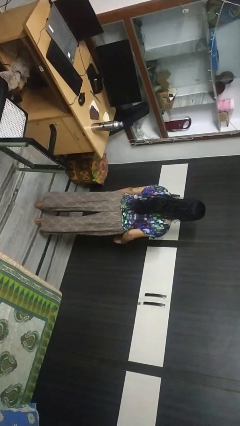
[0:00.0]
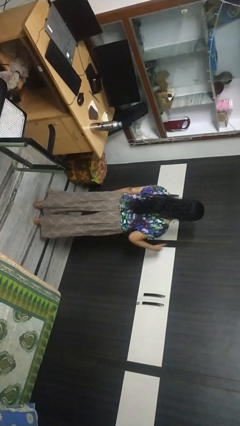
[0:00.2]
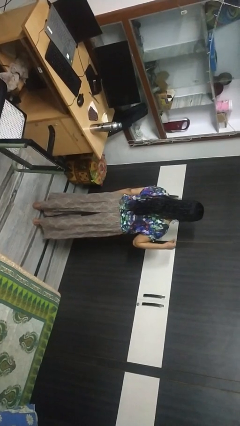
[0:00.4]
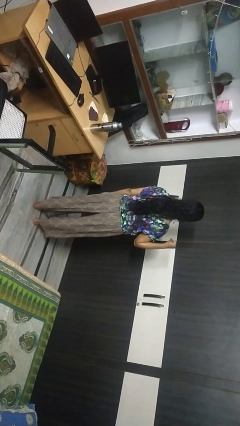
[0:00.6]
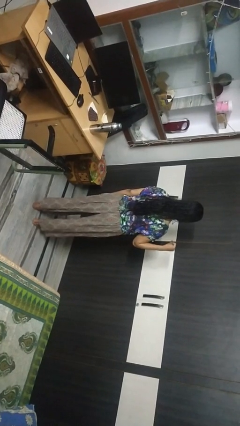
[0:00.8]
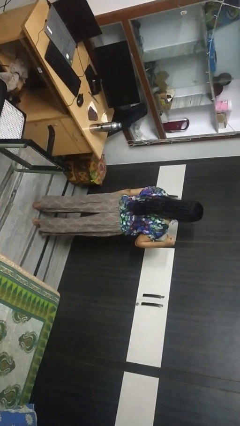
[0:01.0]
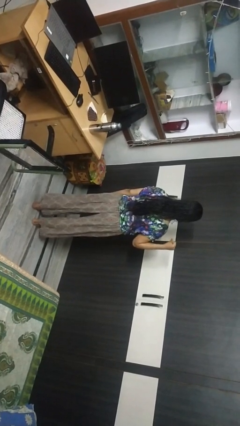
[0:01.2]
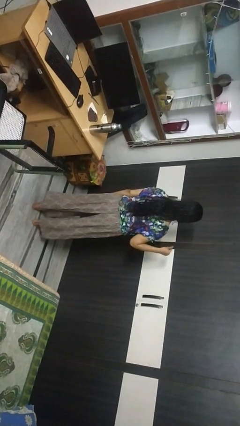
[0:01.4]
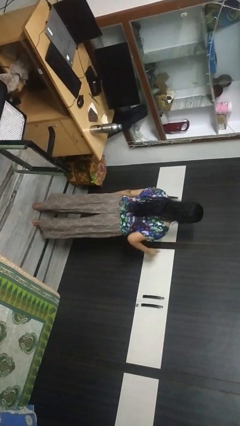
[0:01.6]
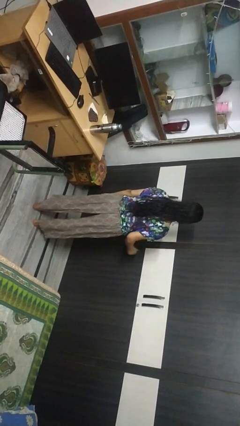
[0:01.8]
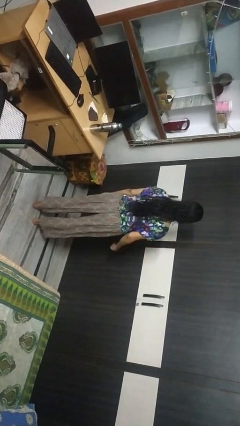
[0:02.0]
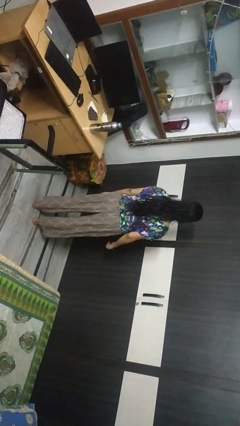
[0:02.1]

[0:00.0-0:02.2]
person gestures behind me

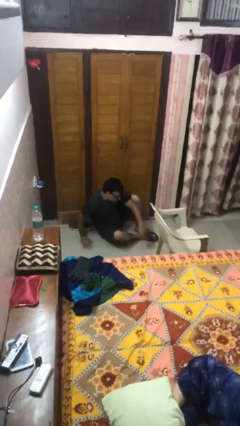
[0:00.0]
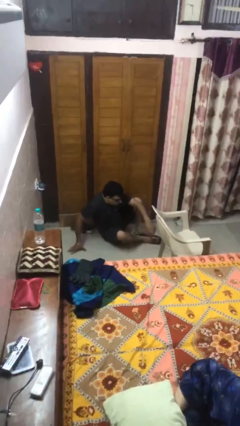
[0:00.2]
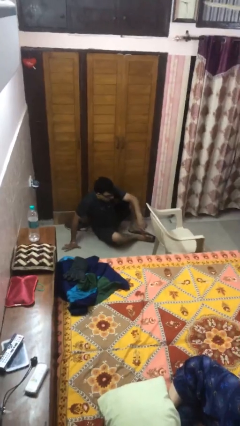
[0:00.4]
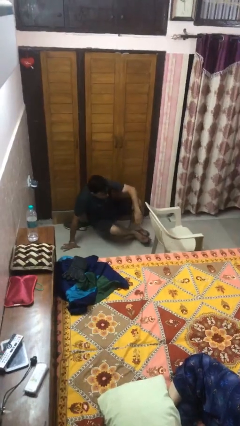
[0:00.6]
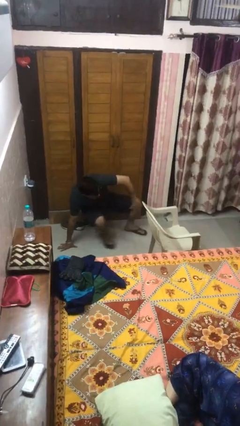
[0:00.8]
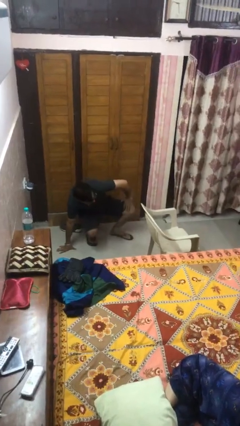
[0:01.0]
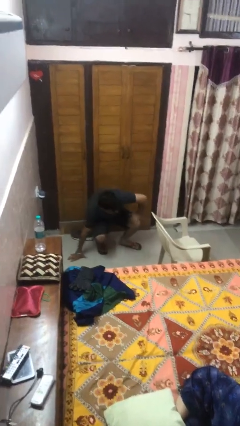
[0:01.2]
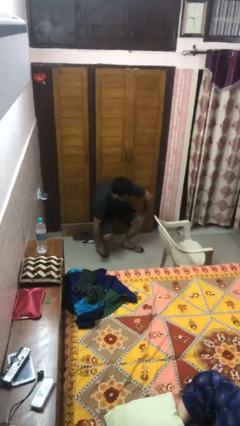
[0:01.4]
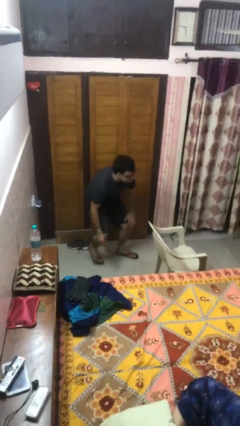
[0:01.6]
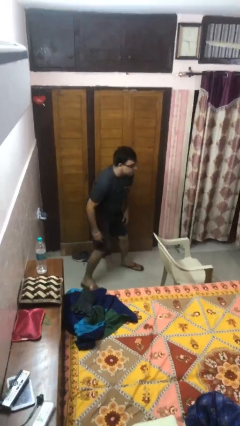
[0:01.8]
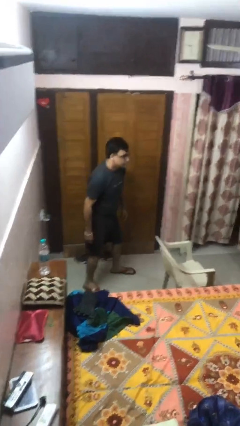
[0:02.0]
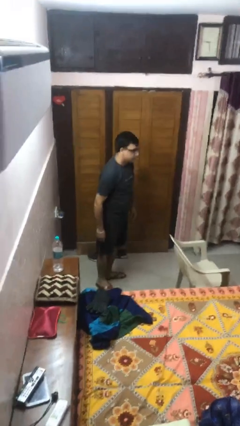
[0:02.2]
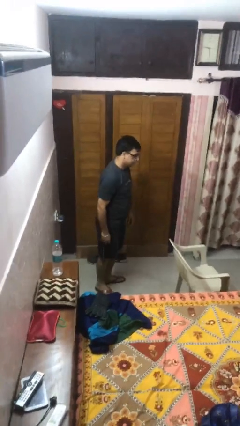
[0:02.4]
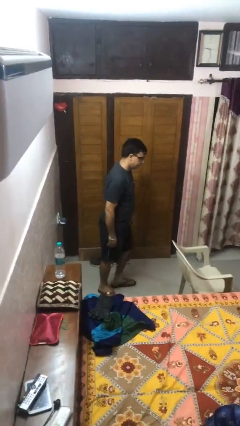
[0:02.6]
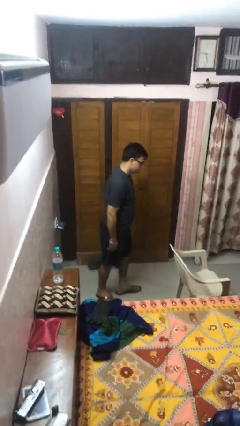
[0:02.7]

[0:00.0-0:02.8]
person stands up from floor

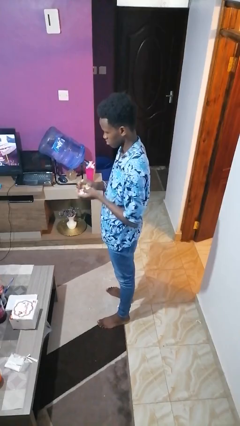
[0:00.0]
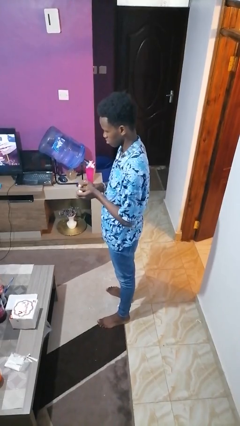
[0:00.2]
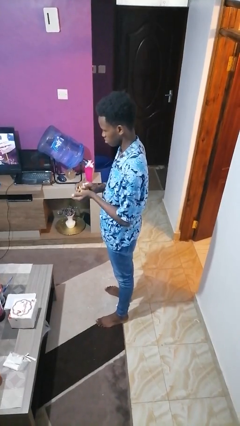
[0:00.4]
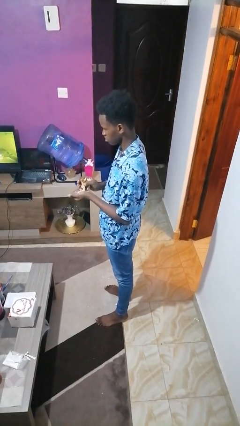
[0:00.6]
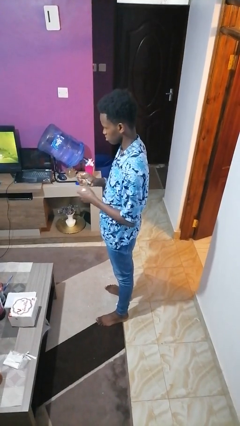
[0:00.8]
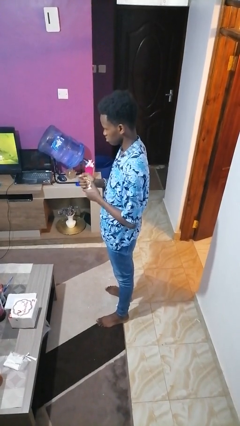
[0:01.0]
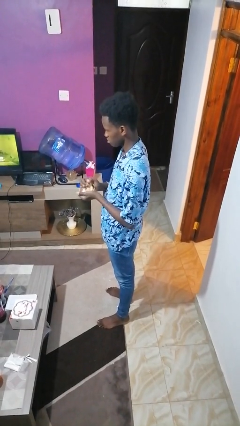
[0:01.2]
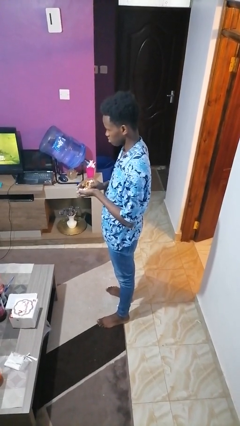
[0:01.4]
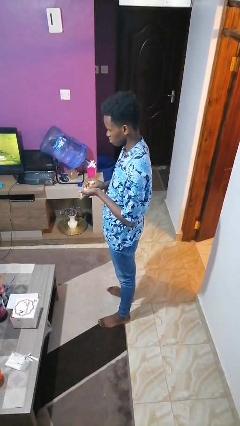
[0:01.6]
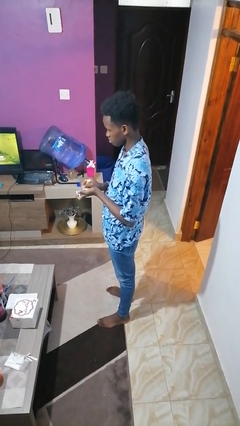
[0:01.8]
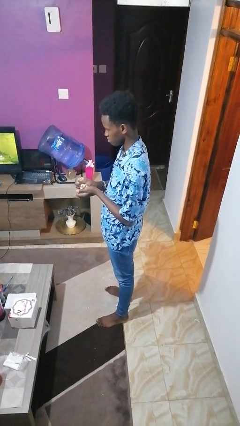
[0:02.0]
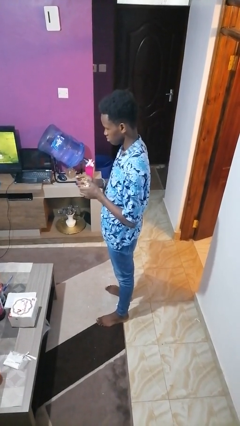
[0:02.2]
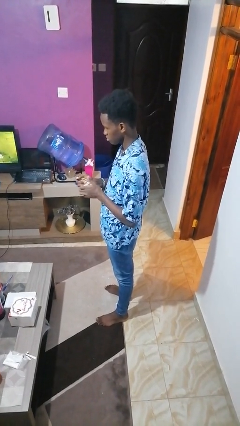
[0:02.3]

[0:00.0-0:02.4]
person crumples paper

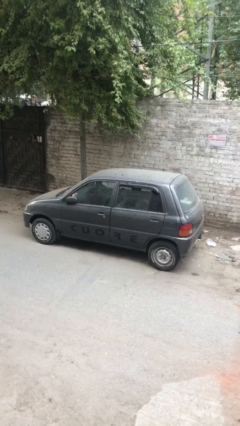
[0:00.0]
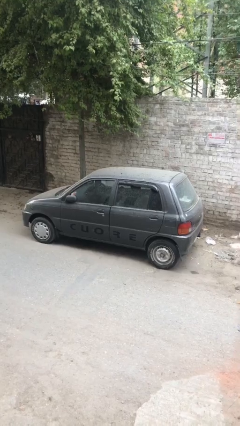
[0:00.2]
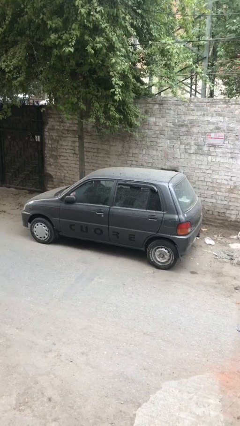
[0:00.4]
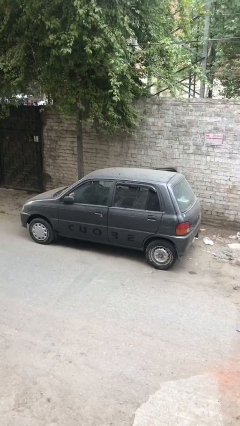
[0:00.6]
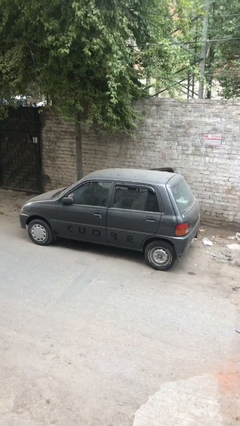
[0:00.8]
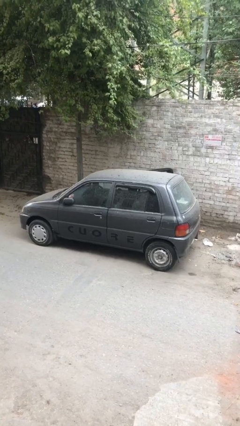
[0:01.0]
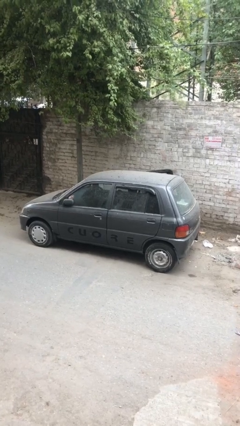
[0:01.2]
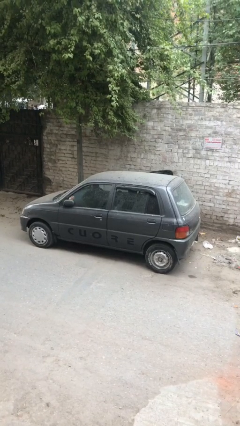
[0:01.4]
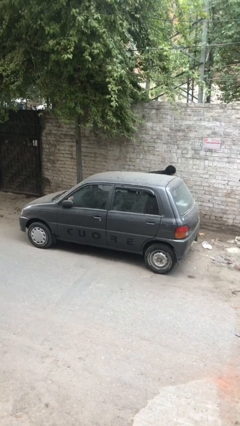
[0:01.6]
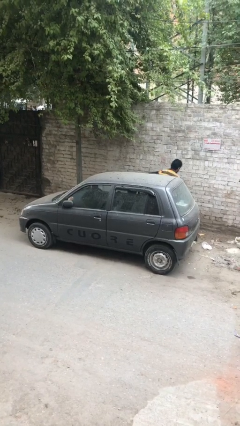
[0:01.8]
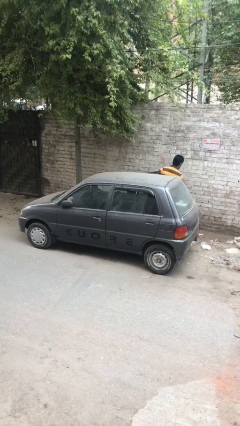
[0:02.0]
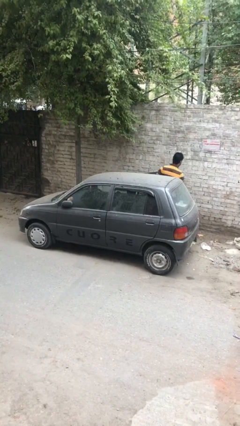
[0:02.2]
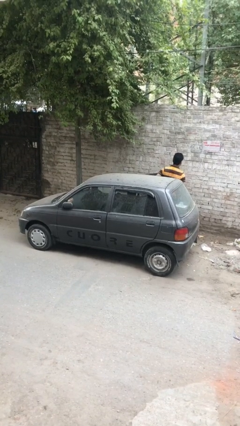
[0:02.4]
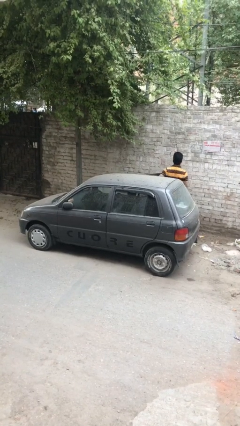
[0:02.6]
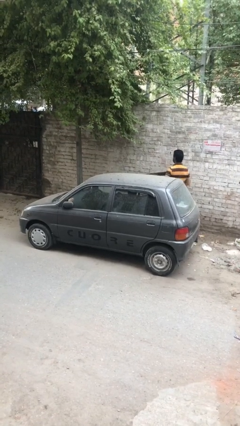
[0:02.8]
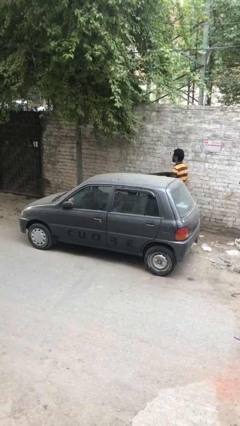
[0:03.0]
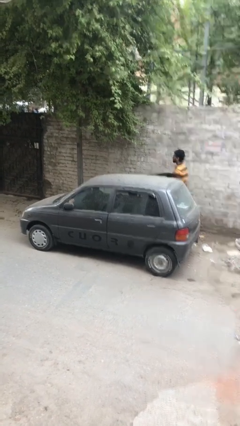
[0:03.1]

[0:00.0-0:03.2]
car drops off person

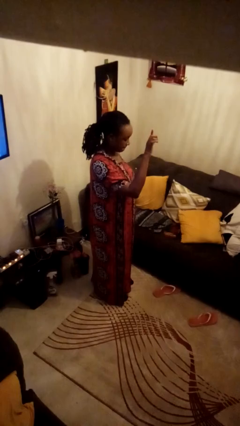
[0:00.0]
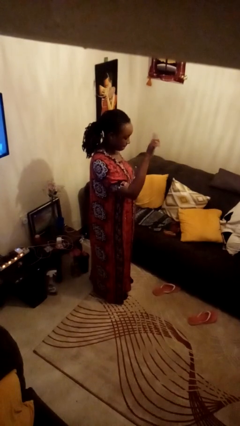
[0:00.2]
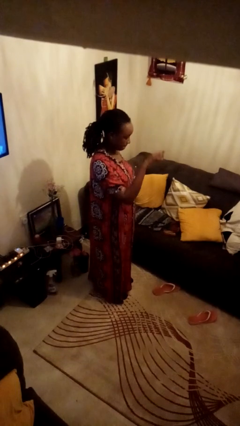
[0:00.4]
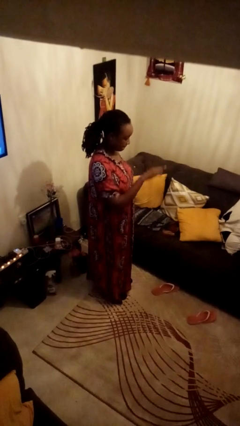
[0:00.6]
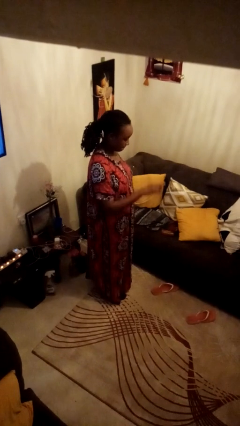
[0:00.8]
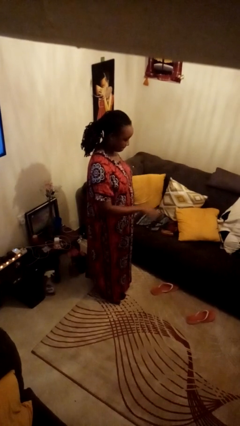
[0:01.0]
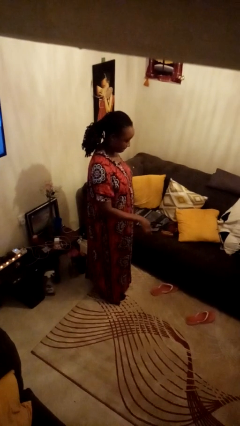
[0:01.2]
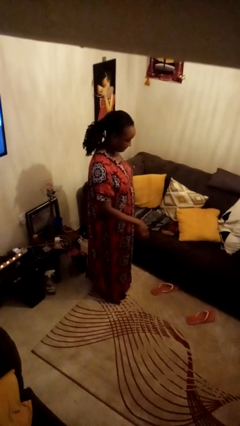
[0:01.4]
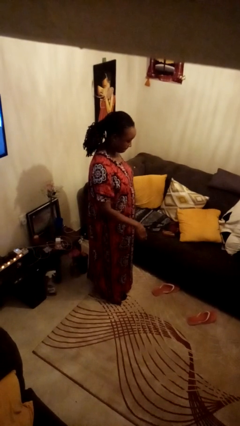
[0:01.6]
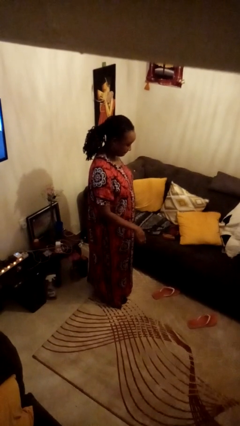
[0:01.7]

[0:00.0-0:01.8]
person gestures swipe down

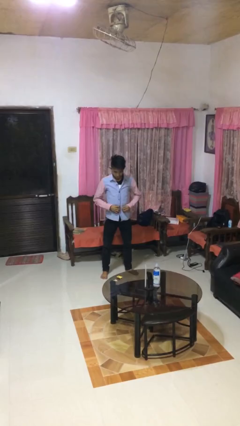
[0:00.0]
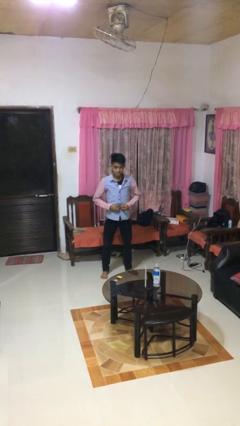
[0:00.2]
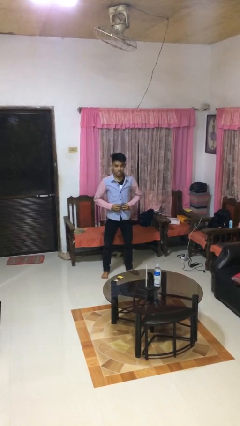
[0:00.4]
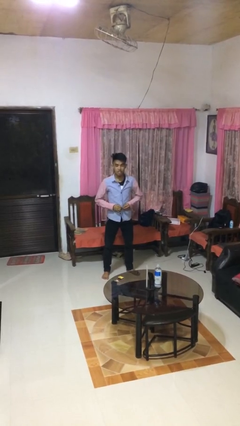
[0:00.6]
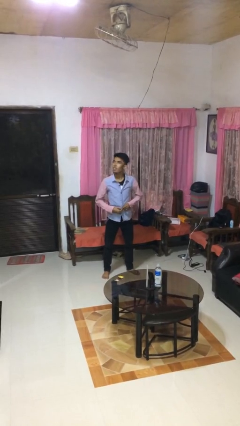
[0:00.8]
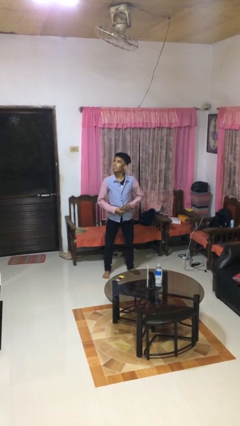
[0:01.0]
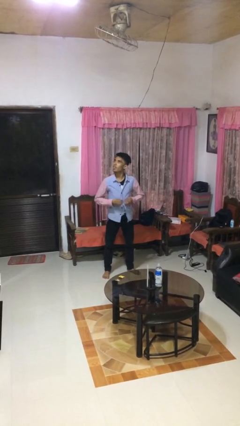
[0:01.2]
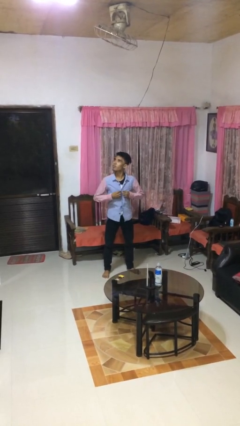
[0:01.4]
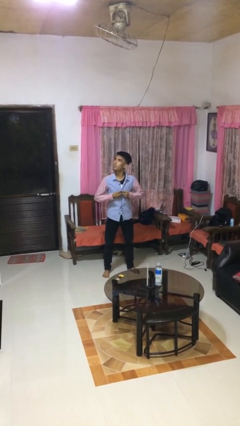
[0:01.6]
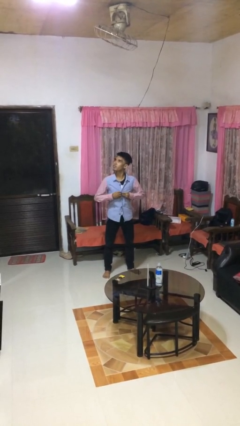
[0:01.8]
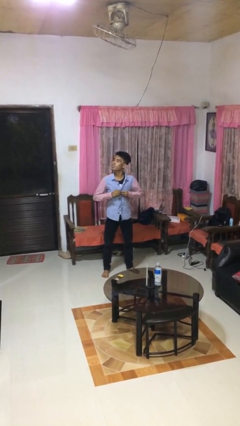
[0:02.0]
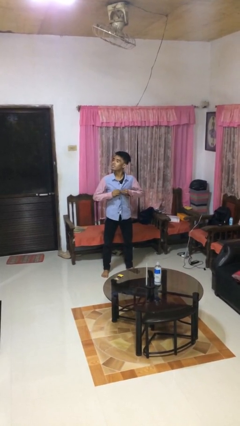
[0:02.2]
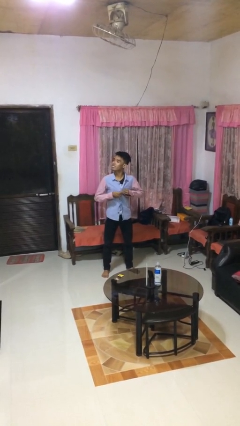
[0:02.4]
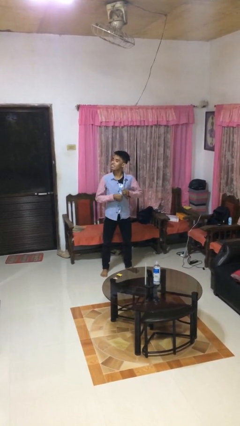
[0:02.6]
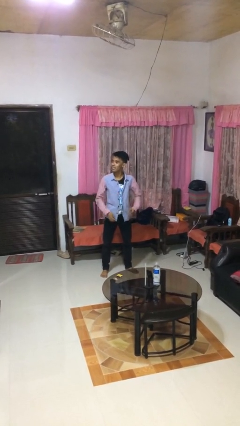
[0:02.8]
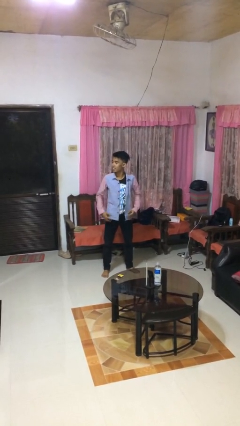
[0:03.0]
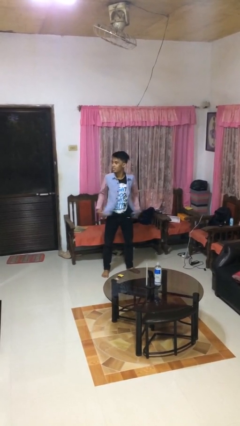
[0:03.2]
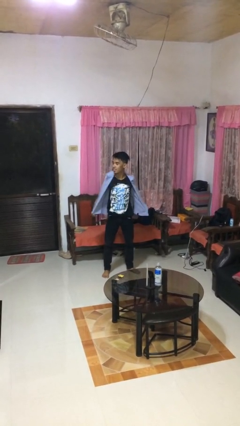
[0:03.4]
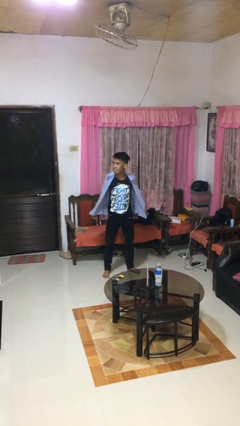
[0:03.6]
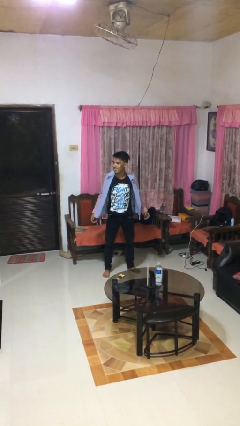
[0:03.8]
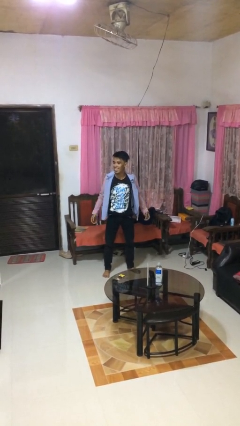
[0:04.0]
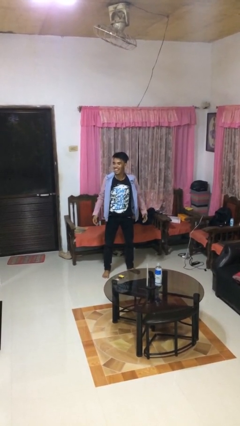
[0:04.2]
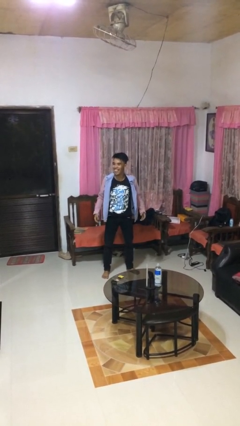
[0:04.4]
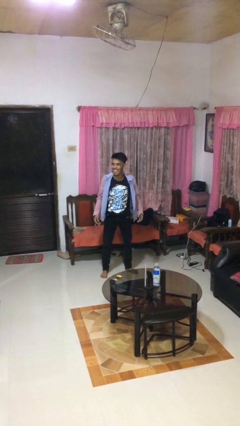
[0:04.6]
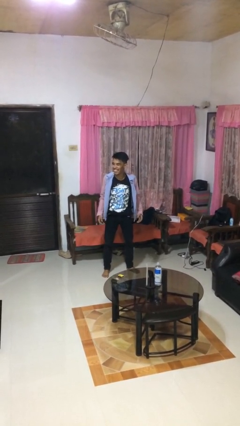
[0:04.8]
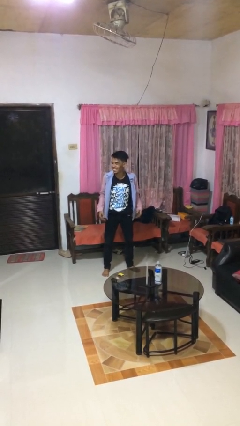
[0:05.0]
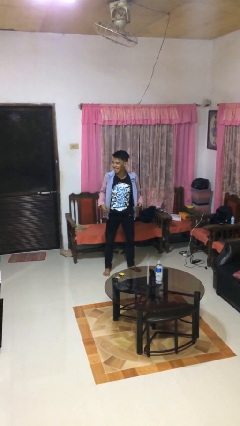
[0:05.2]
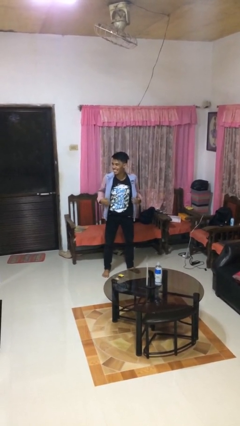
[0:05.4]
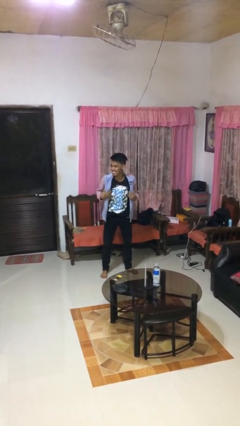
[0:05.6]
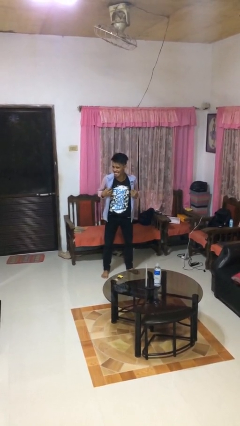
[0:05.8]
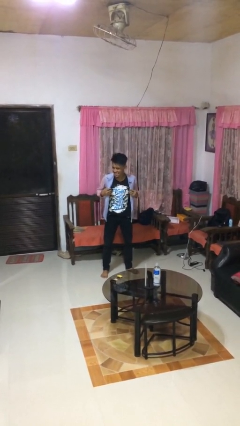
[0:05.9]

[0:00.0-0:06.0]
person unbuttons shirt
